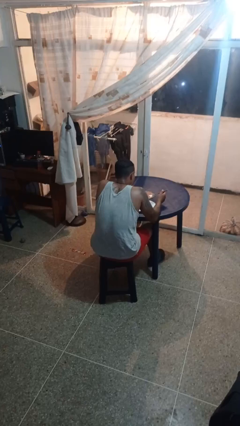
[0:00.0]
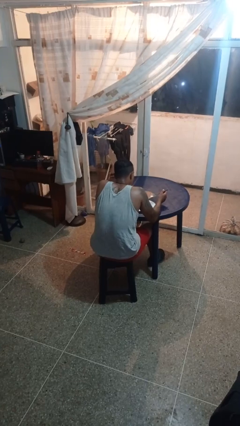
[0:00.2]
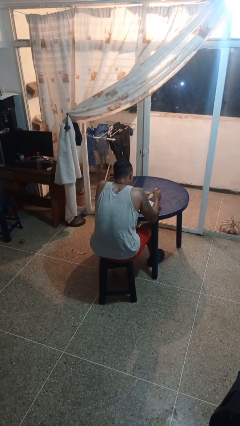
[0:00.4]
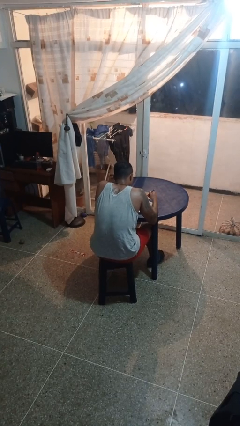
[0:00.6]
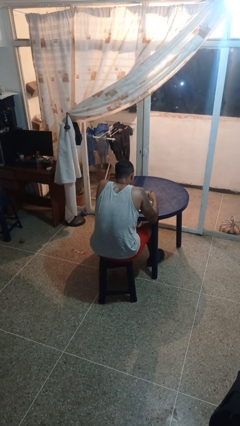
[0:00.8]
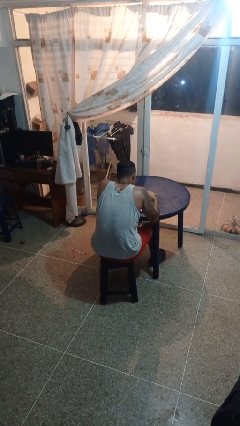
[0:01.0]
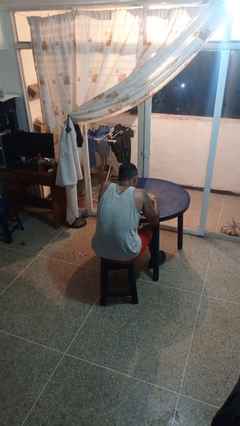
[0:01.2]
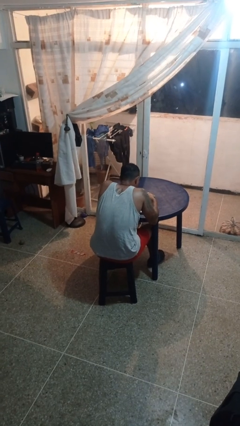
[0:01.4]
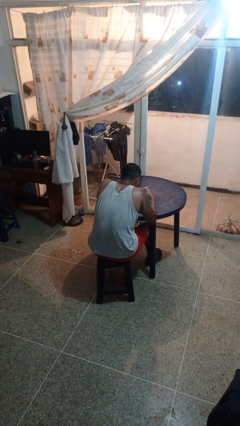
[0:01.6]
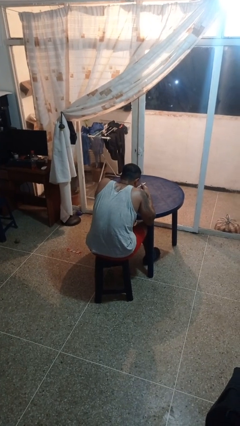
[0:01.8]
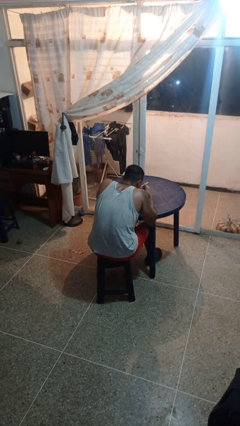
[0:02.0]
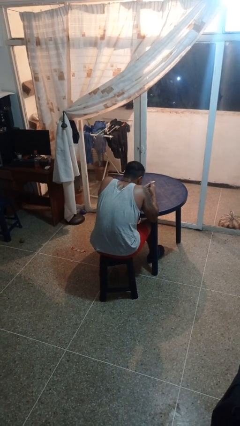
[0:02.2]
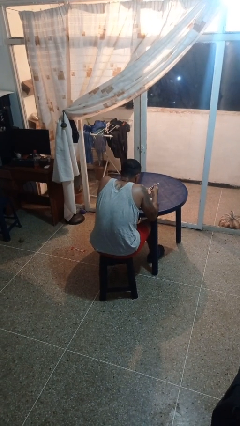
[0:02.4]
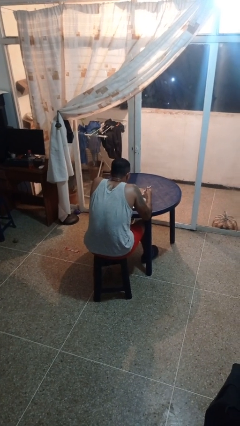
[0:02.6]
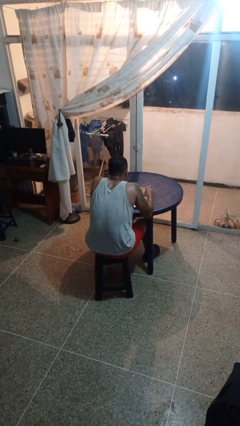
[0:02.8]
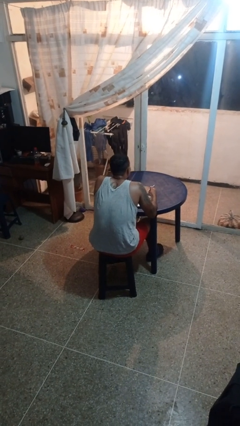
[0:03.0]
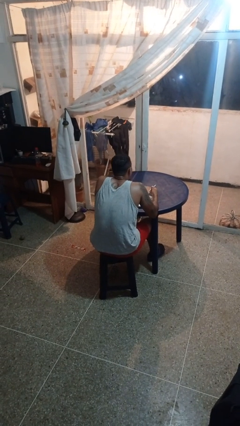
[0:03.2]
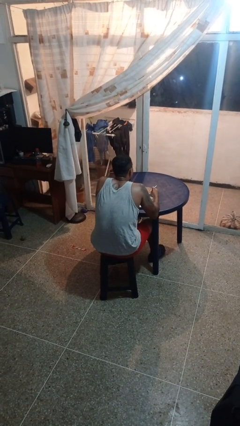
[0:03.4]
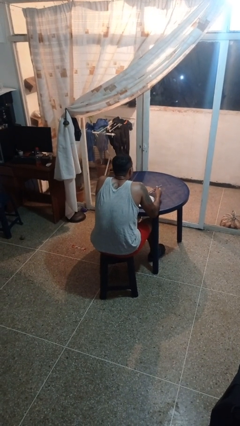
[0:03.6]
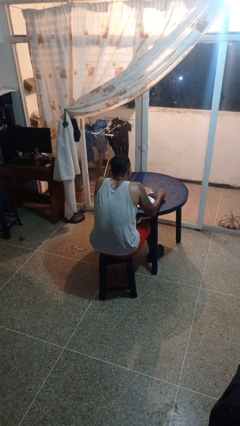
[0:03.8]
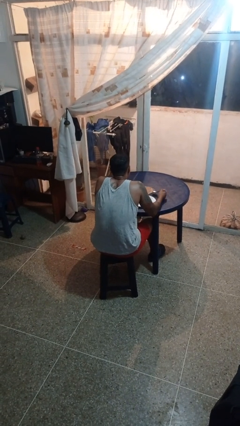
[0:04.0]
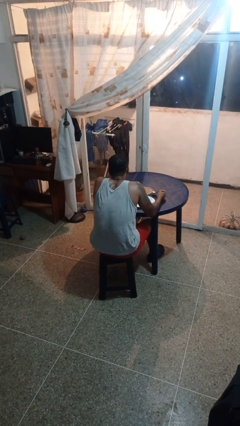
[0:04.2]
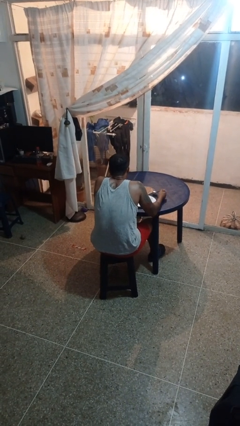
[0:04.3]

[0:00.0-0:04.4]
person eats with utensil

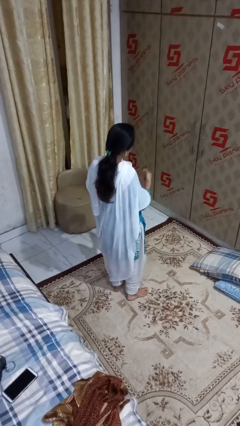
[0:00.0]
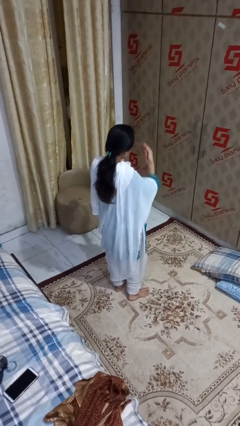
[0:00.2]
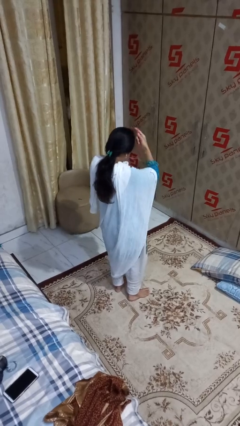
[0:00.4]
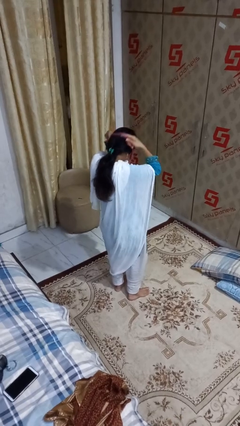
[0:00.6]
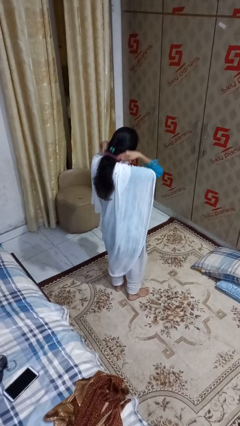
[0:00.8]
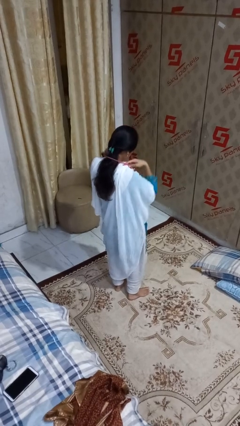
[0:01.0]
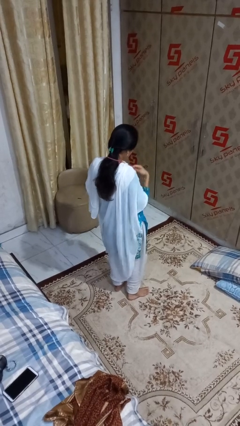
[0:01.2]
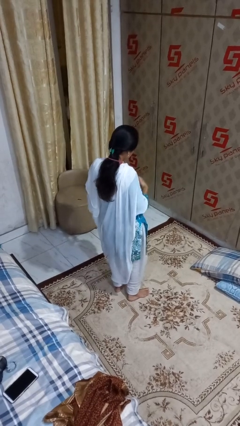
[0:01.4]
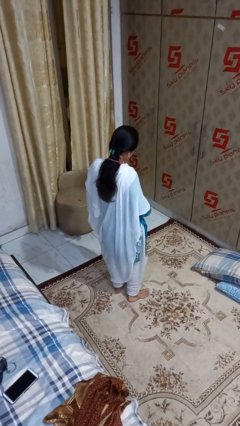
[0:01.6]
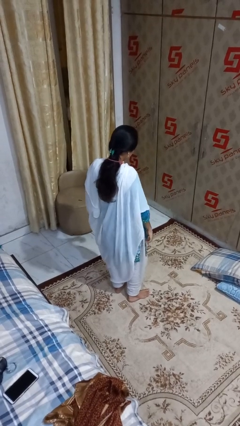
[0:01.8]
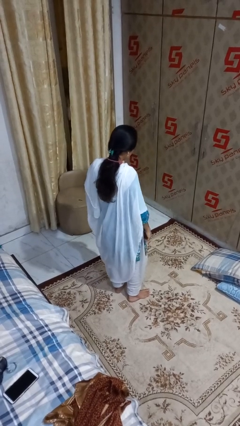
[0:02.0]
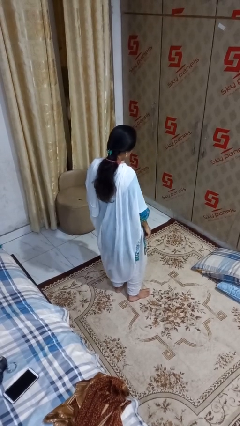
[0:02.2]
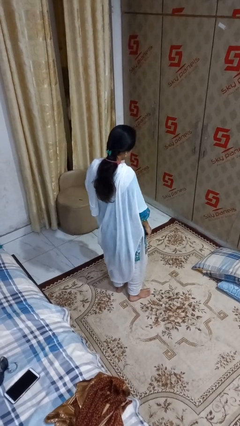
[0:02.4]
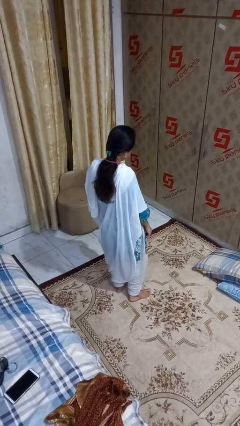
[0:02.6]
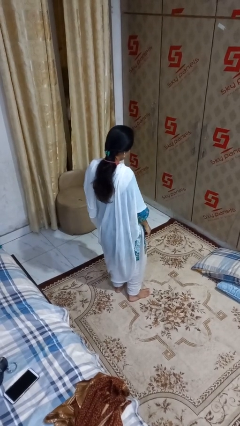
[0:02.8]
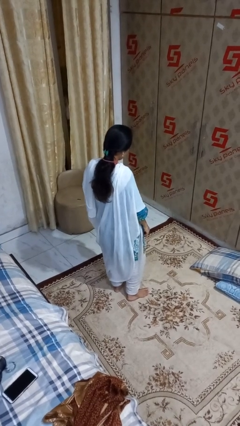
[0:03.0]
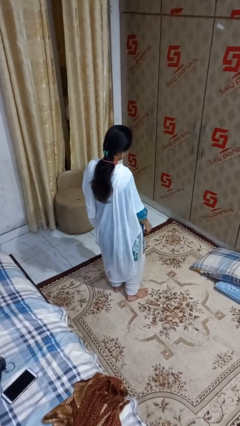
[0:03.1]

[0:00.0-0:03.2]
person puts on necklace

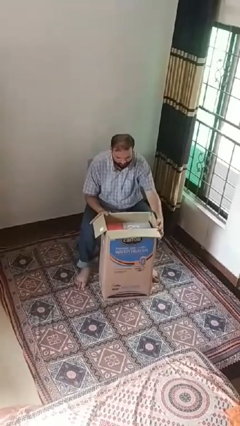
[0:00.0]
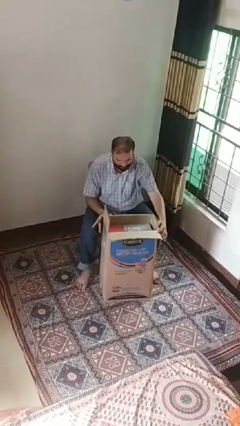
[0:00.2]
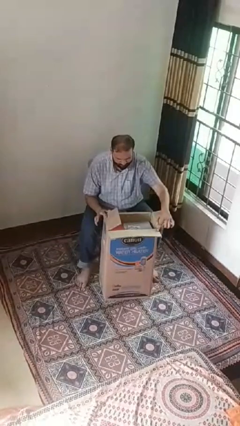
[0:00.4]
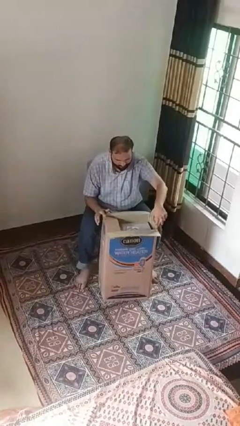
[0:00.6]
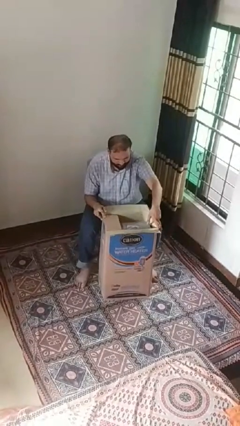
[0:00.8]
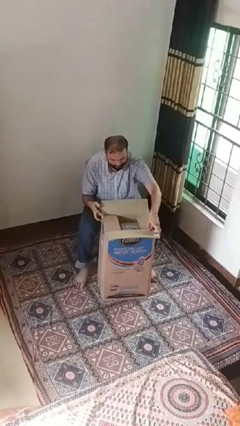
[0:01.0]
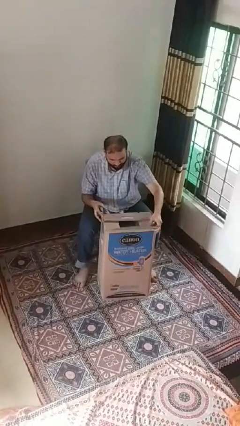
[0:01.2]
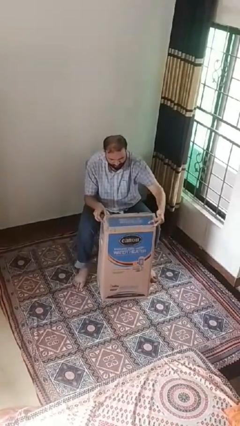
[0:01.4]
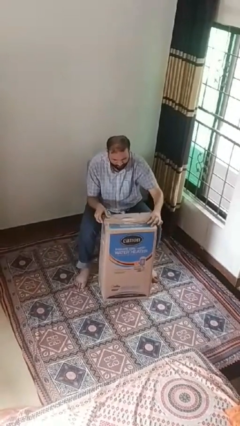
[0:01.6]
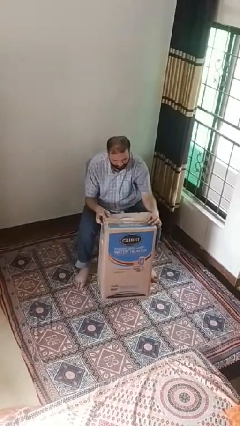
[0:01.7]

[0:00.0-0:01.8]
person closes box

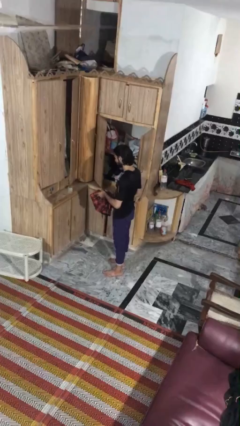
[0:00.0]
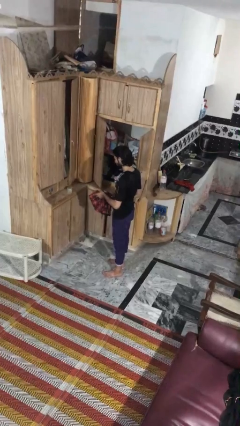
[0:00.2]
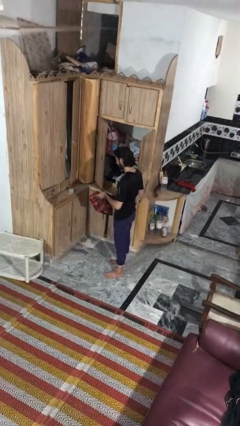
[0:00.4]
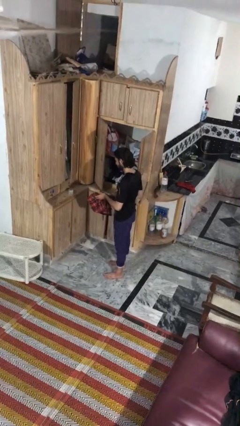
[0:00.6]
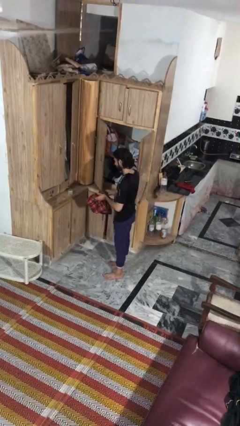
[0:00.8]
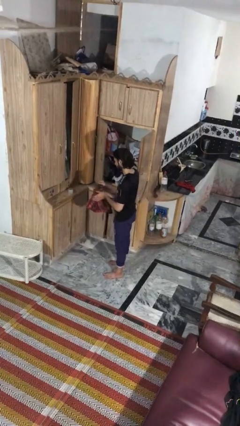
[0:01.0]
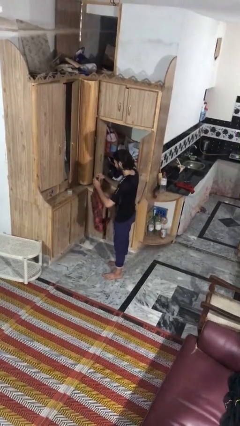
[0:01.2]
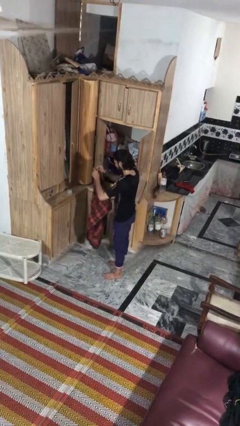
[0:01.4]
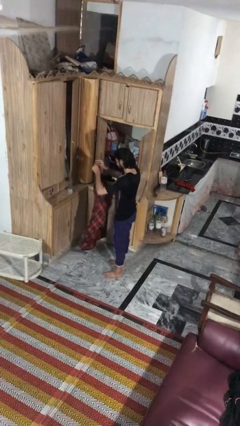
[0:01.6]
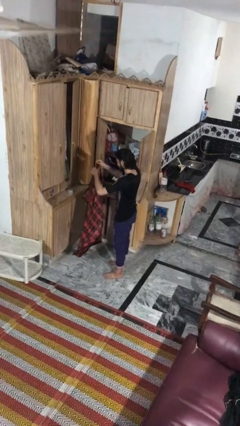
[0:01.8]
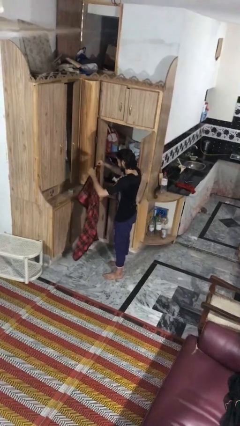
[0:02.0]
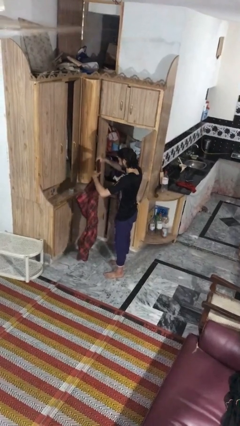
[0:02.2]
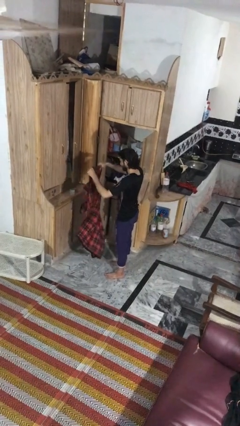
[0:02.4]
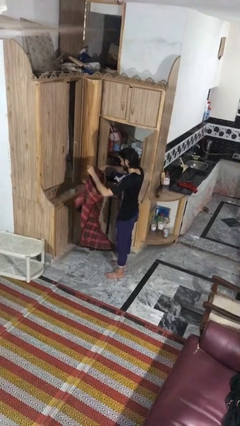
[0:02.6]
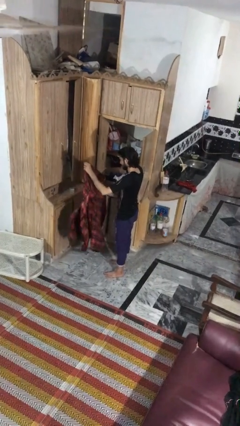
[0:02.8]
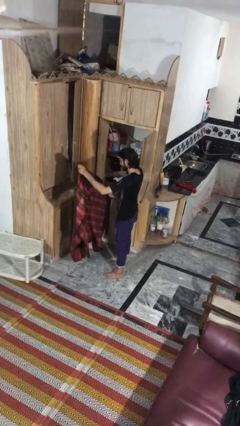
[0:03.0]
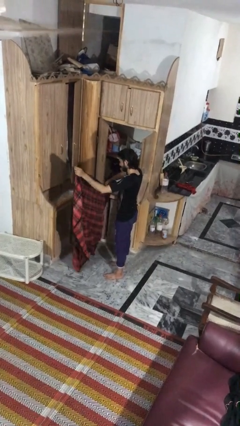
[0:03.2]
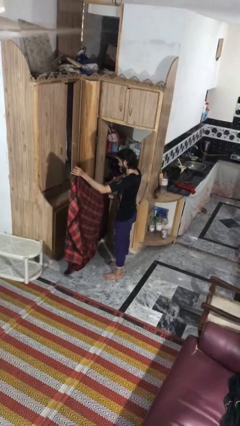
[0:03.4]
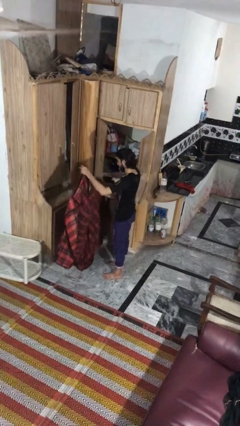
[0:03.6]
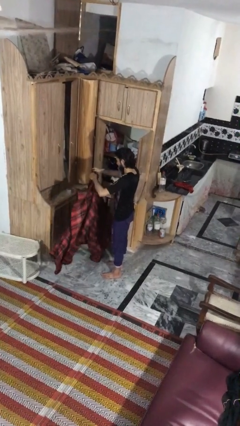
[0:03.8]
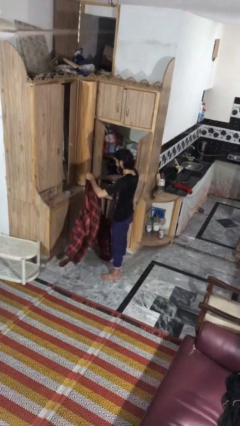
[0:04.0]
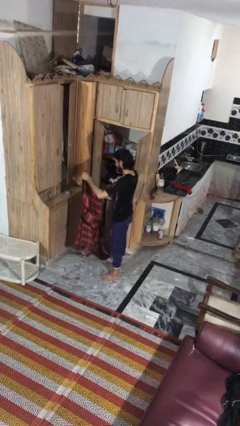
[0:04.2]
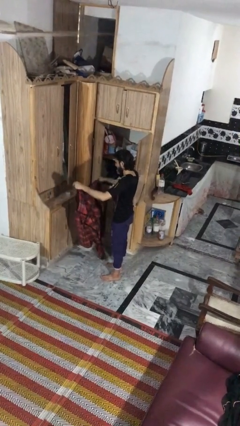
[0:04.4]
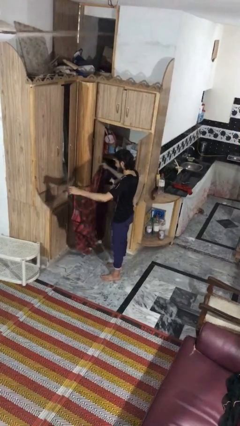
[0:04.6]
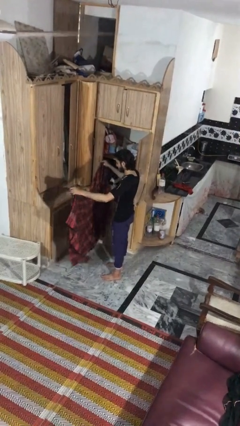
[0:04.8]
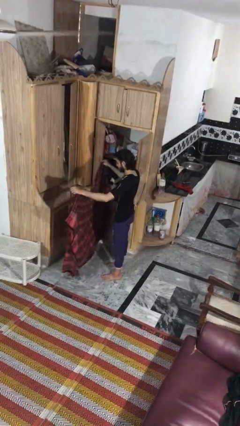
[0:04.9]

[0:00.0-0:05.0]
person unfolds blanket

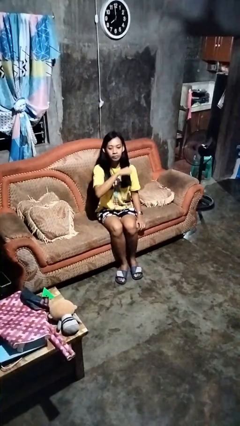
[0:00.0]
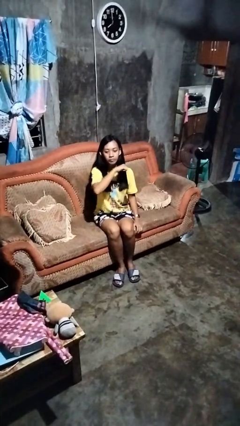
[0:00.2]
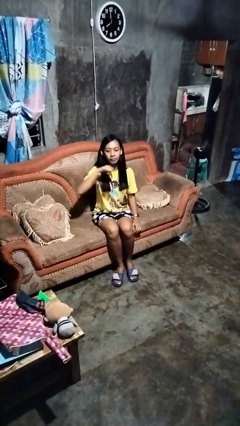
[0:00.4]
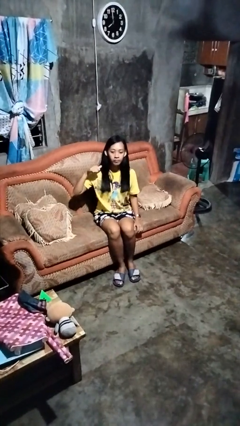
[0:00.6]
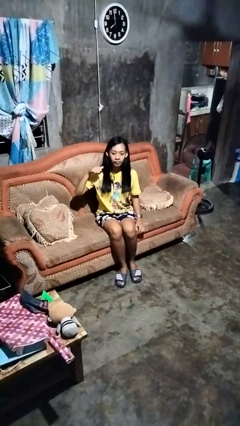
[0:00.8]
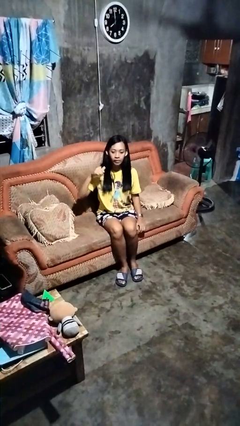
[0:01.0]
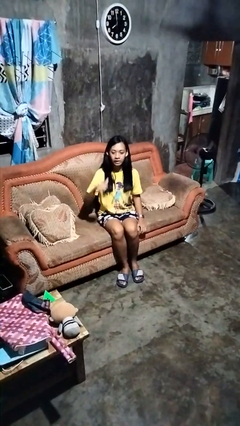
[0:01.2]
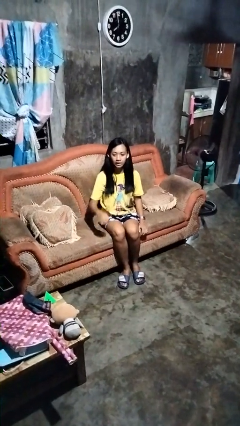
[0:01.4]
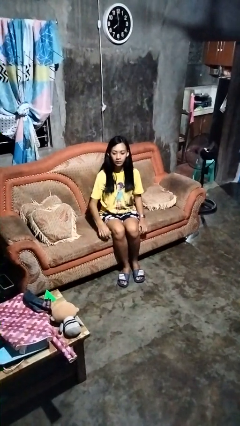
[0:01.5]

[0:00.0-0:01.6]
person gestures cut

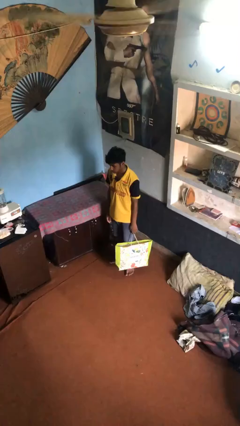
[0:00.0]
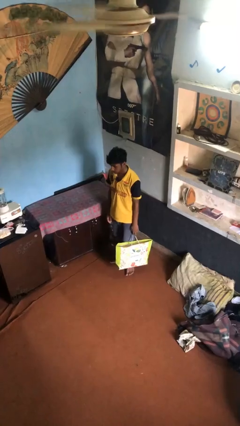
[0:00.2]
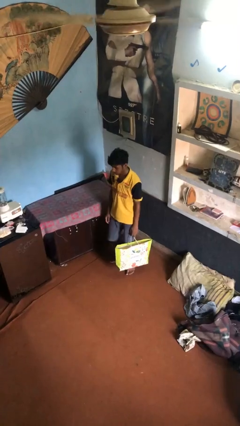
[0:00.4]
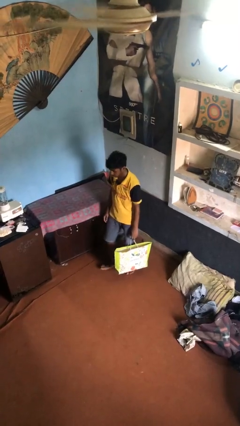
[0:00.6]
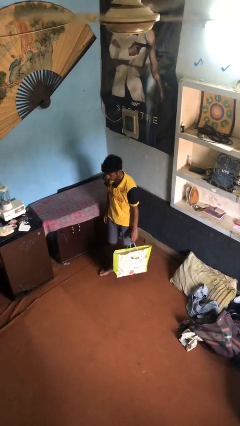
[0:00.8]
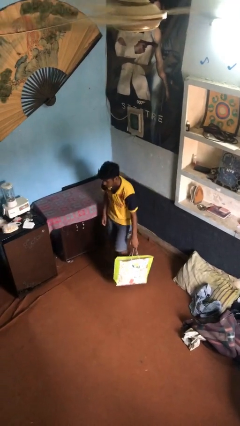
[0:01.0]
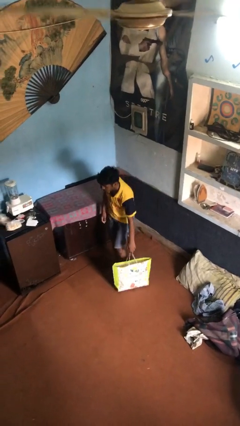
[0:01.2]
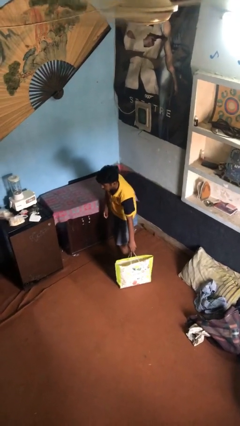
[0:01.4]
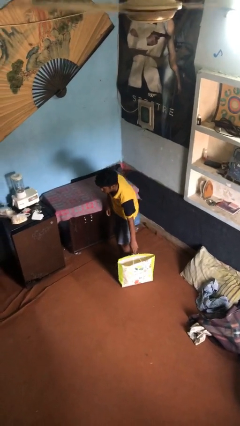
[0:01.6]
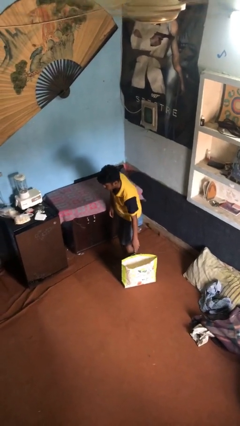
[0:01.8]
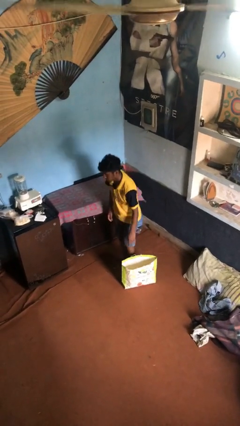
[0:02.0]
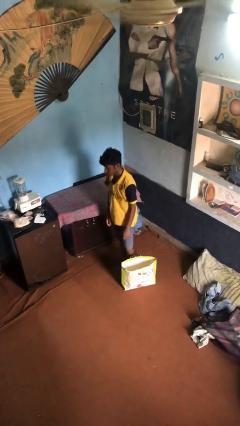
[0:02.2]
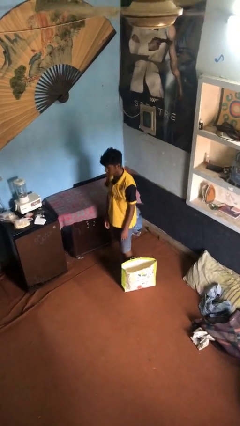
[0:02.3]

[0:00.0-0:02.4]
person puts down object on floor
